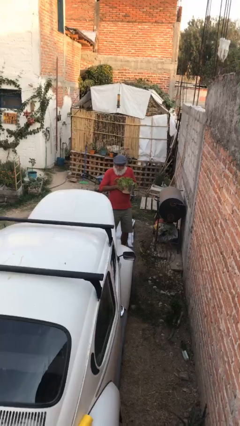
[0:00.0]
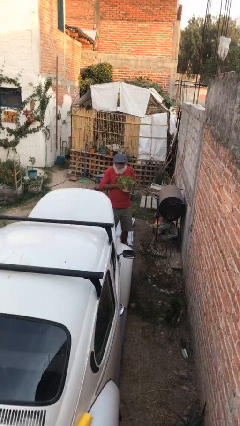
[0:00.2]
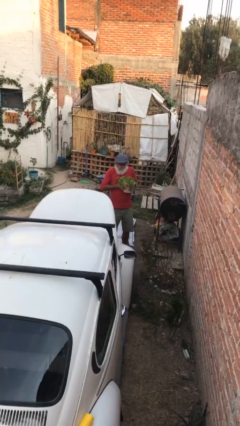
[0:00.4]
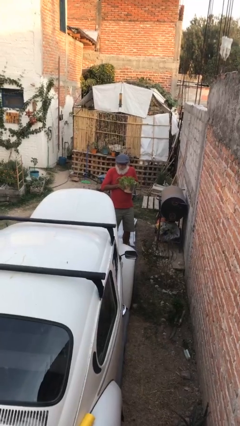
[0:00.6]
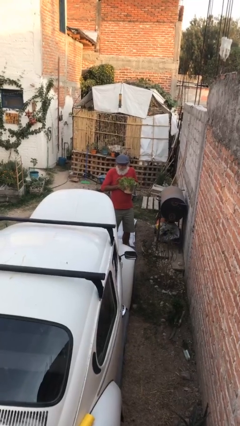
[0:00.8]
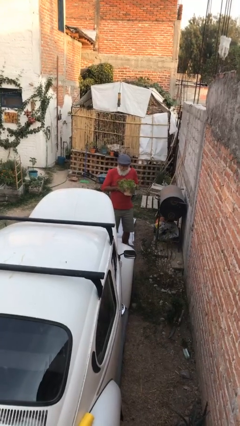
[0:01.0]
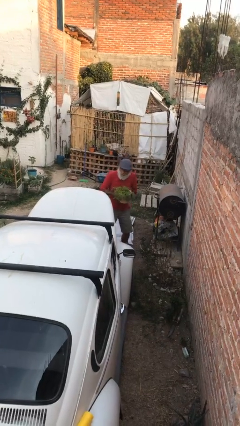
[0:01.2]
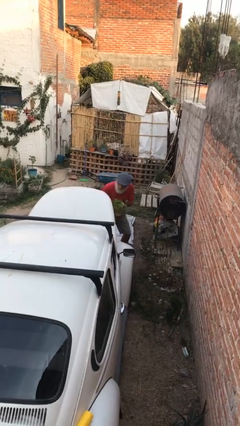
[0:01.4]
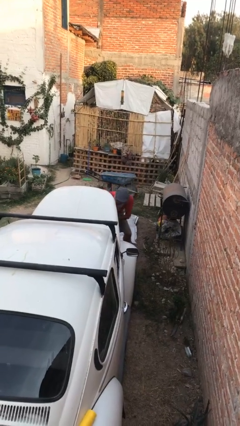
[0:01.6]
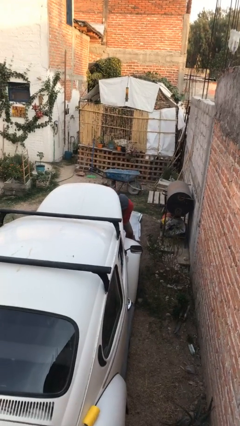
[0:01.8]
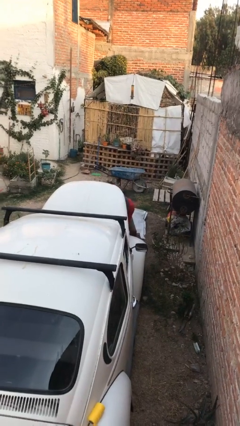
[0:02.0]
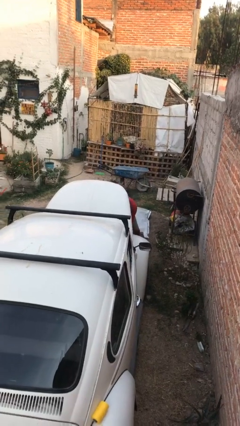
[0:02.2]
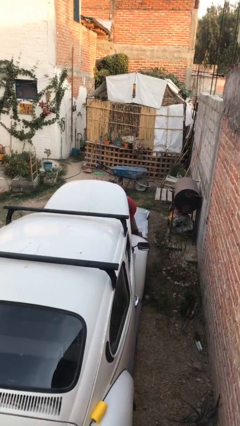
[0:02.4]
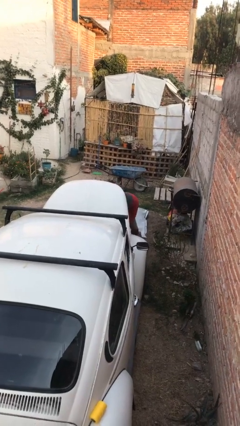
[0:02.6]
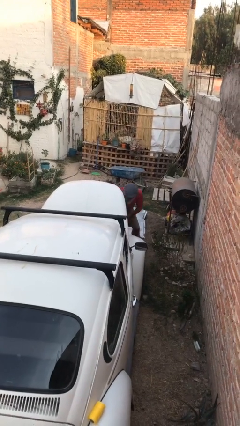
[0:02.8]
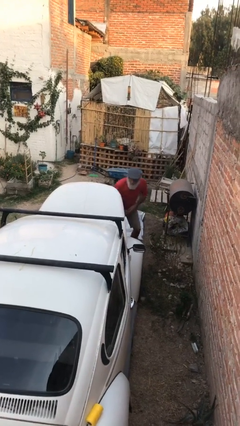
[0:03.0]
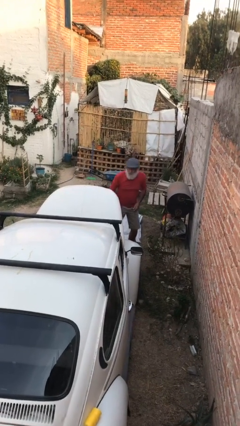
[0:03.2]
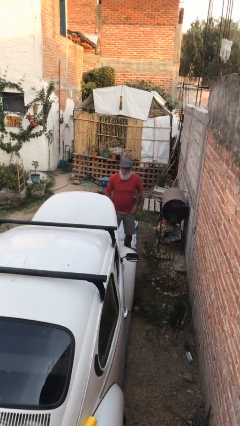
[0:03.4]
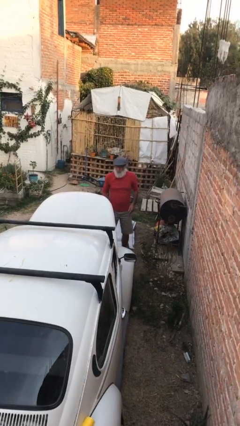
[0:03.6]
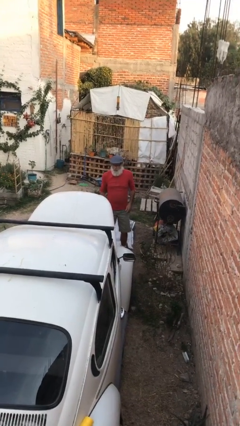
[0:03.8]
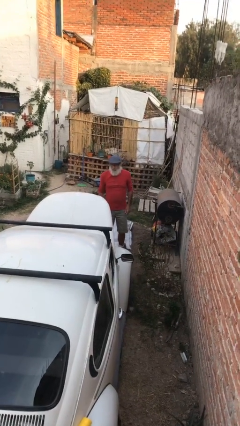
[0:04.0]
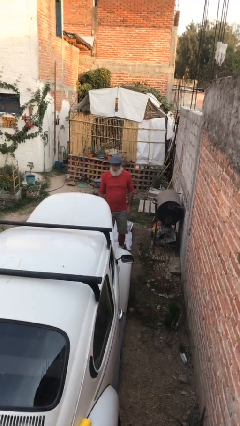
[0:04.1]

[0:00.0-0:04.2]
person loads car

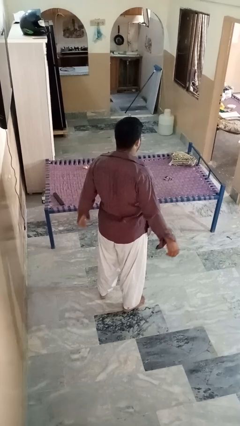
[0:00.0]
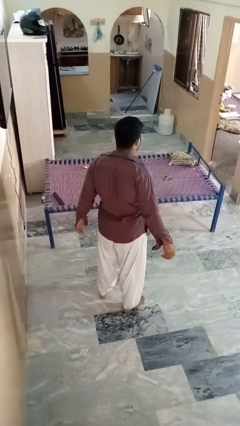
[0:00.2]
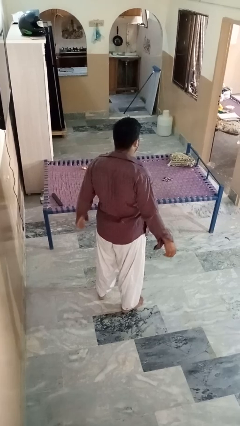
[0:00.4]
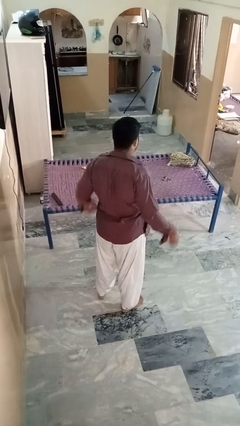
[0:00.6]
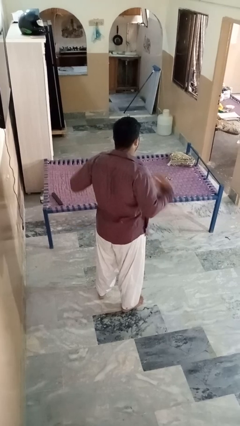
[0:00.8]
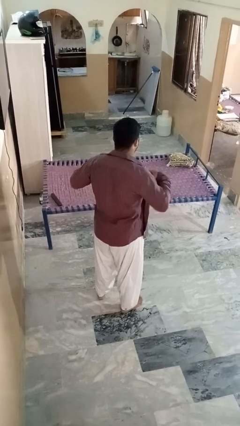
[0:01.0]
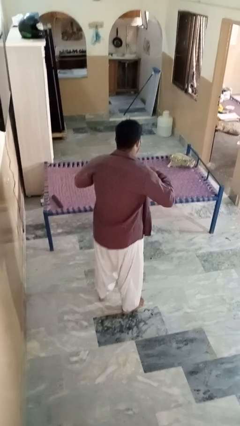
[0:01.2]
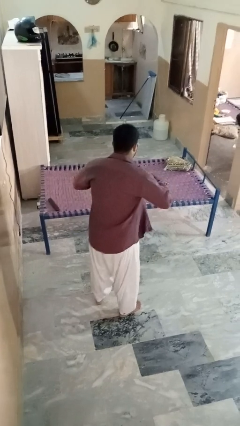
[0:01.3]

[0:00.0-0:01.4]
person buttons shirt

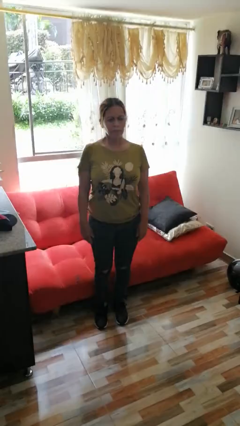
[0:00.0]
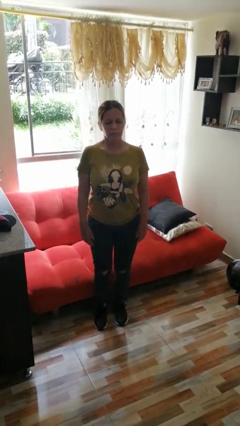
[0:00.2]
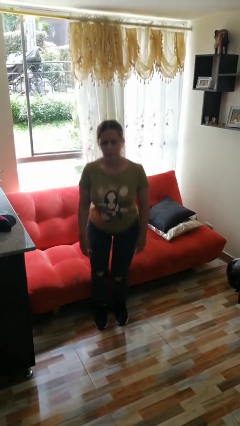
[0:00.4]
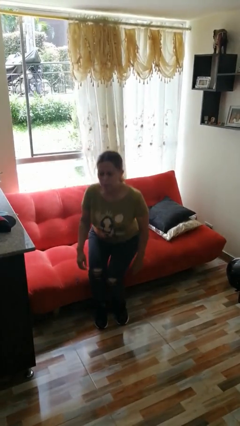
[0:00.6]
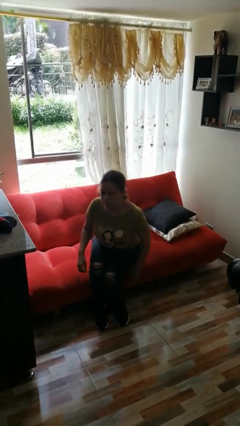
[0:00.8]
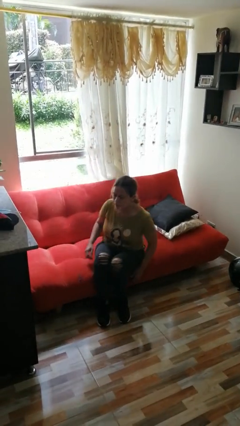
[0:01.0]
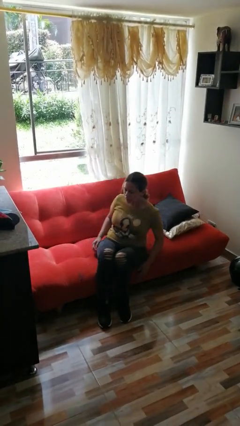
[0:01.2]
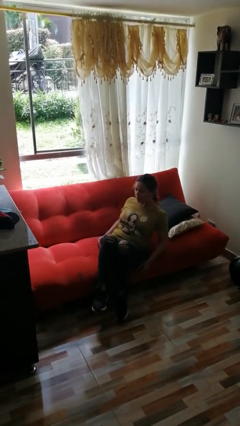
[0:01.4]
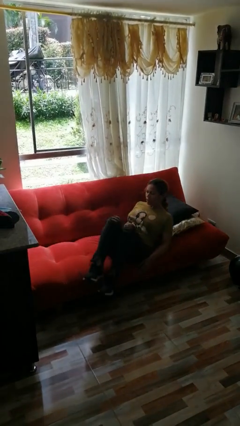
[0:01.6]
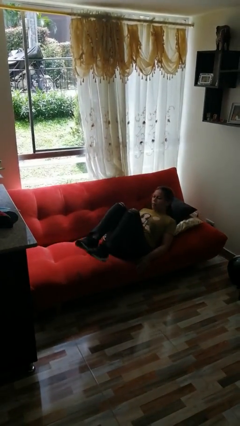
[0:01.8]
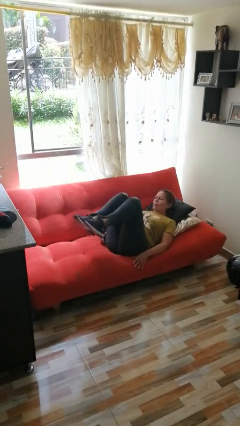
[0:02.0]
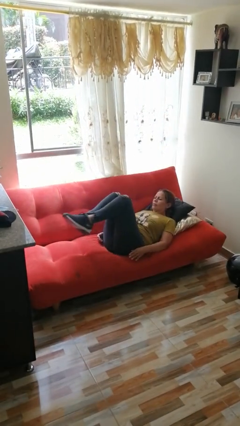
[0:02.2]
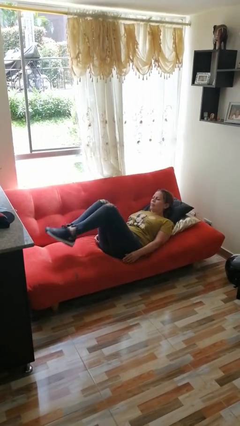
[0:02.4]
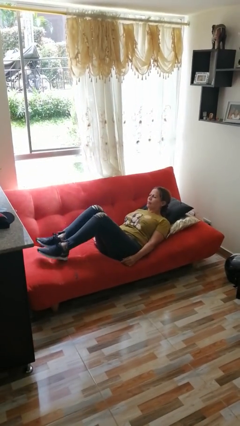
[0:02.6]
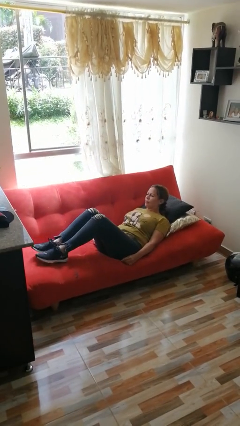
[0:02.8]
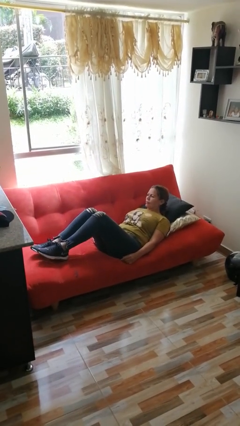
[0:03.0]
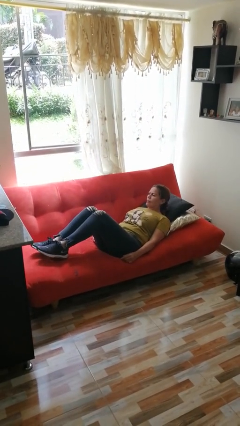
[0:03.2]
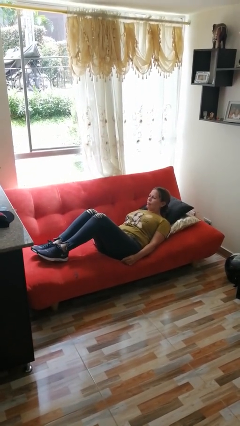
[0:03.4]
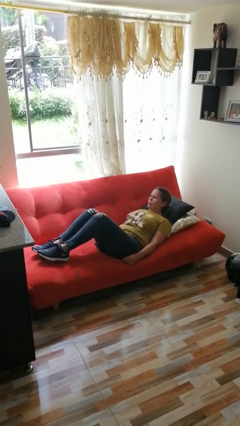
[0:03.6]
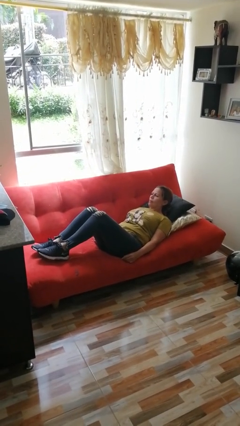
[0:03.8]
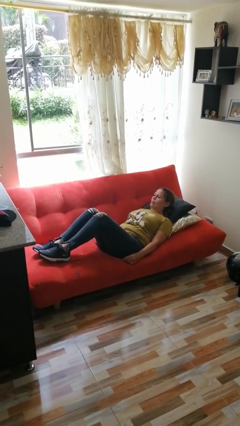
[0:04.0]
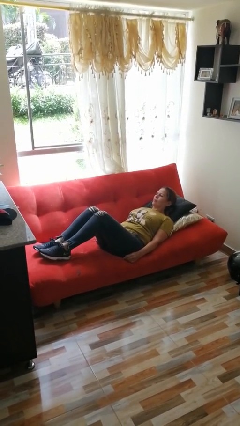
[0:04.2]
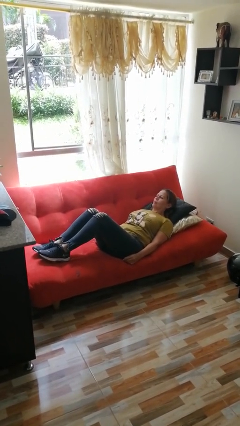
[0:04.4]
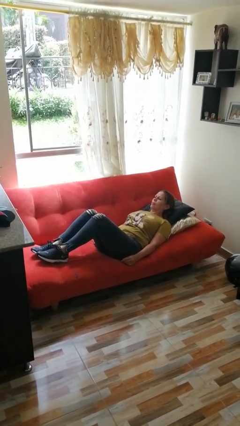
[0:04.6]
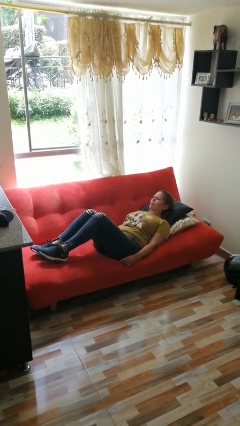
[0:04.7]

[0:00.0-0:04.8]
person lies down on couch

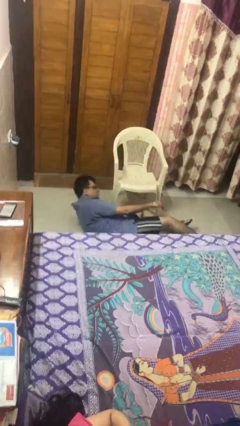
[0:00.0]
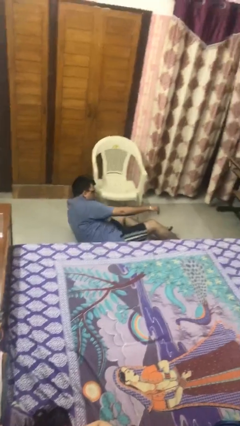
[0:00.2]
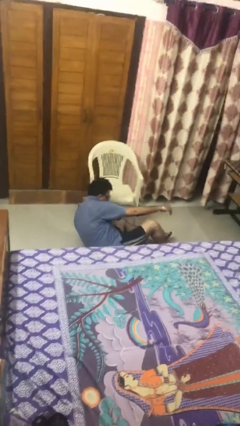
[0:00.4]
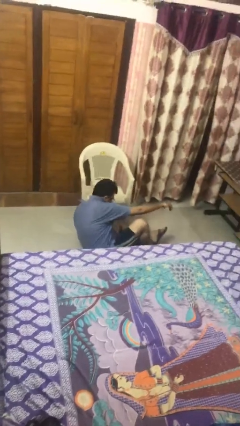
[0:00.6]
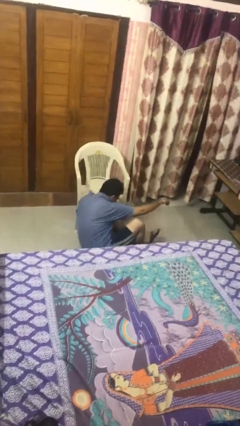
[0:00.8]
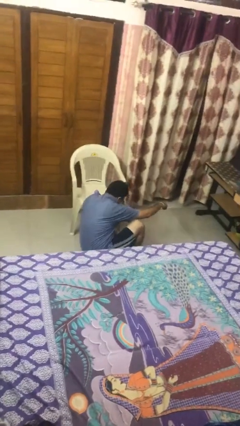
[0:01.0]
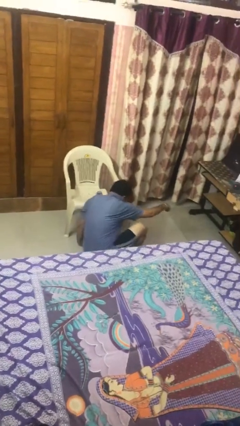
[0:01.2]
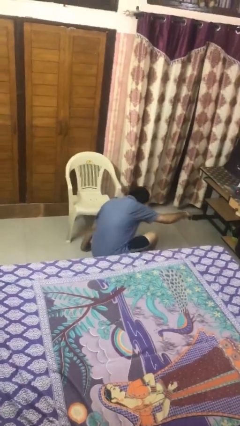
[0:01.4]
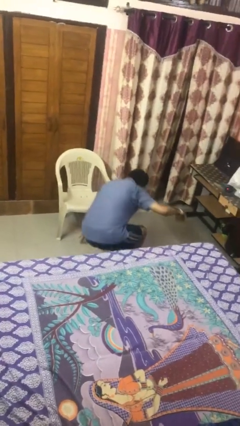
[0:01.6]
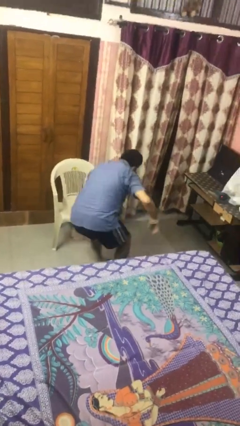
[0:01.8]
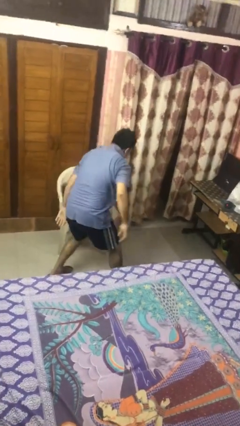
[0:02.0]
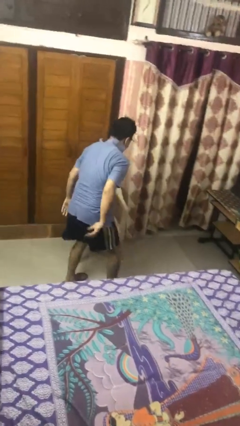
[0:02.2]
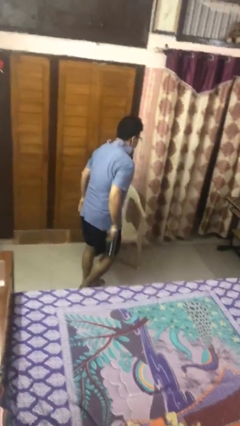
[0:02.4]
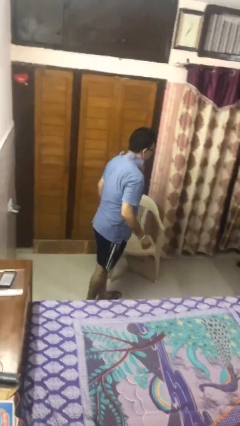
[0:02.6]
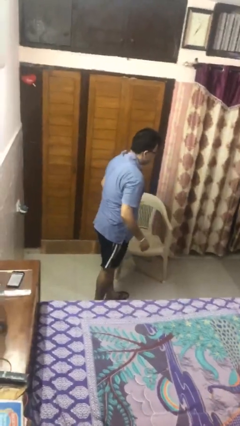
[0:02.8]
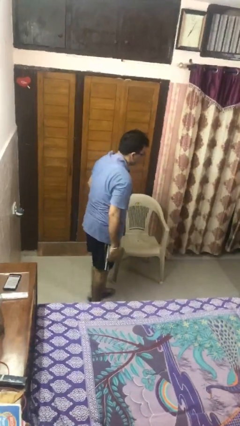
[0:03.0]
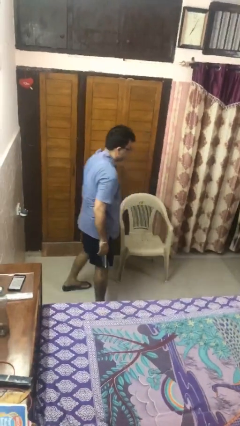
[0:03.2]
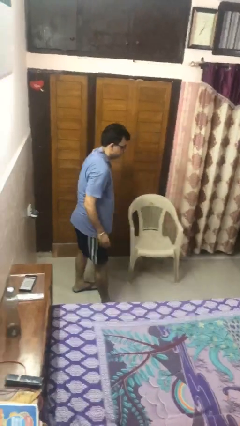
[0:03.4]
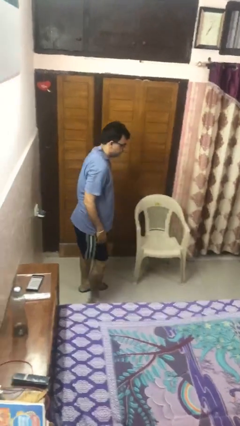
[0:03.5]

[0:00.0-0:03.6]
person stands up from floor

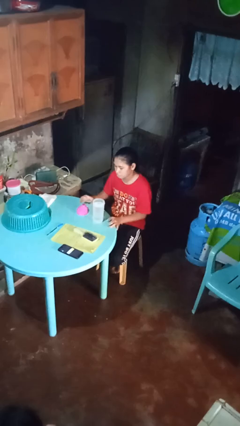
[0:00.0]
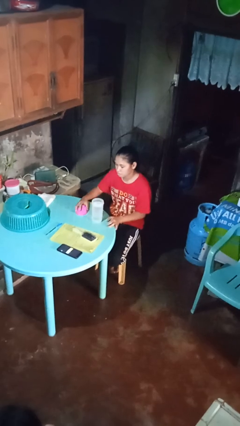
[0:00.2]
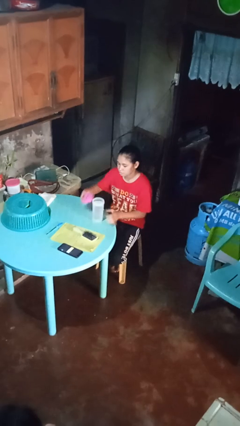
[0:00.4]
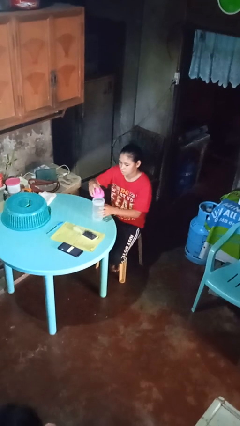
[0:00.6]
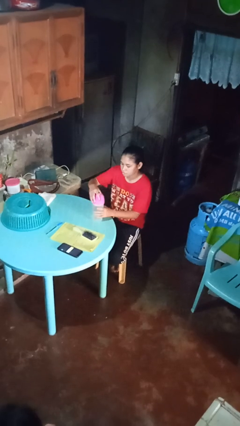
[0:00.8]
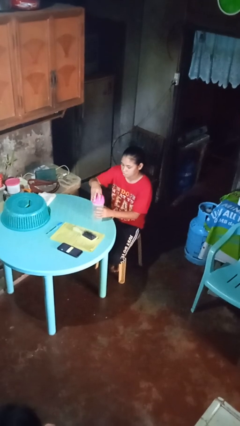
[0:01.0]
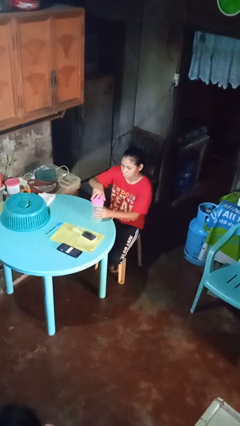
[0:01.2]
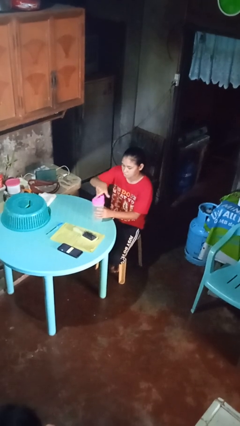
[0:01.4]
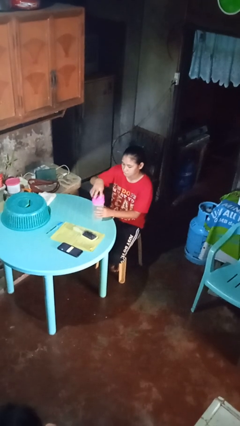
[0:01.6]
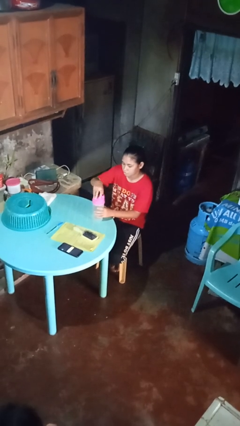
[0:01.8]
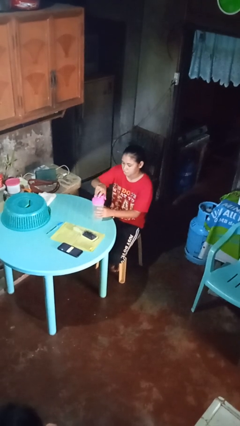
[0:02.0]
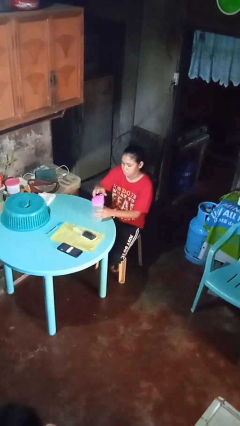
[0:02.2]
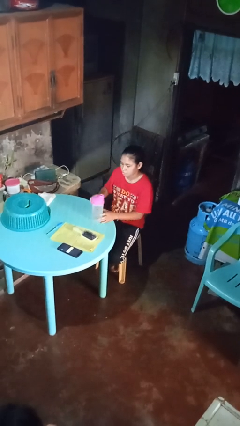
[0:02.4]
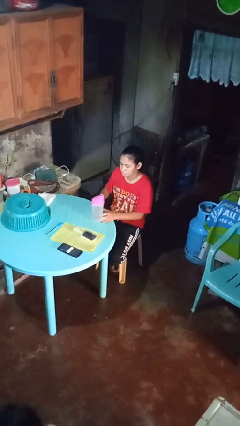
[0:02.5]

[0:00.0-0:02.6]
person screws lid to bottle

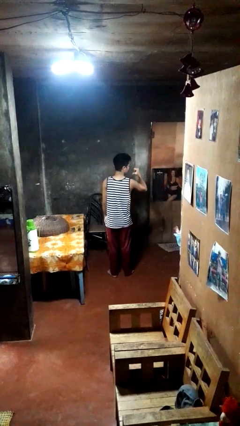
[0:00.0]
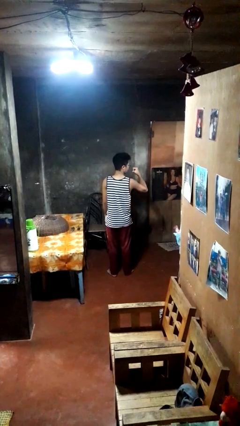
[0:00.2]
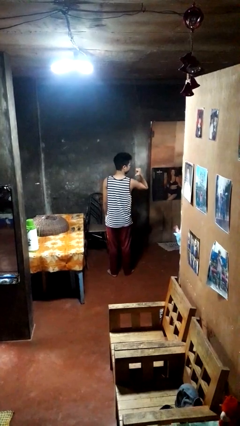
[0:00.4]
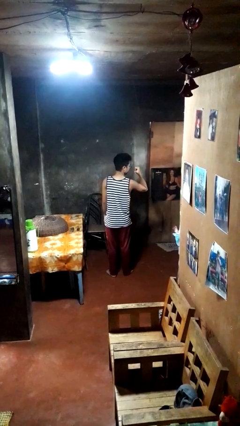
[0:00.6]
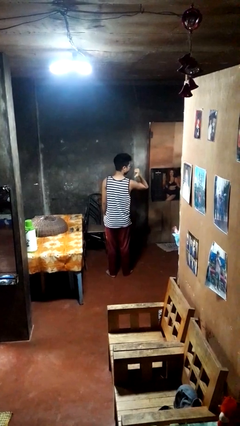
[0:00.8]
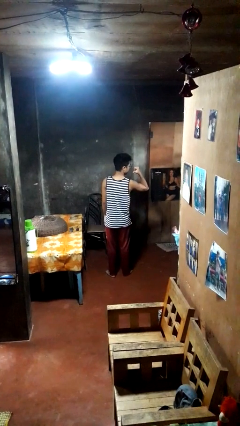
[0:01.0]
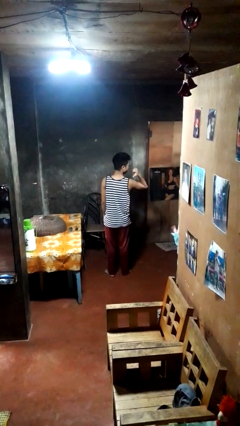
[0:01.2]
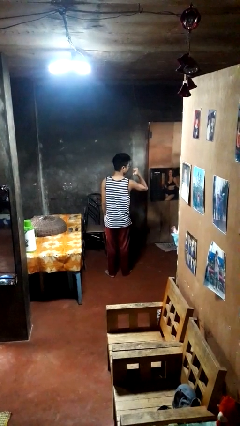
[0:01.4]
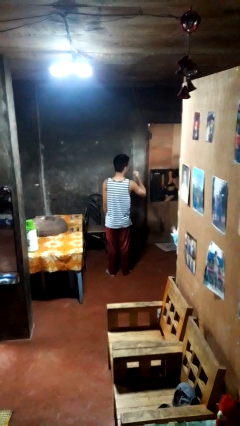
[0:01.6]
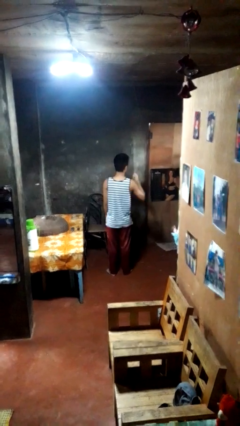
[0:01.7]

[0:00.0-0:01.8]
person gestures behind me
